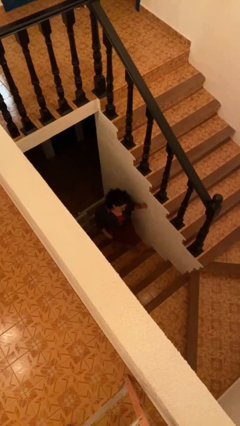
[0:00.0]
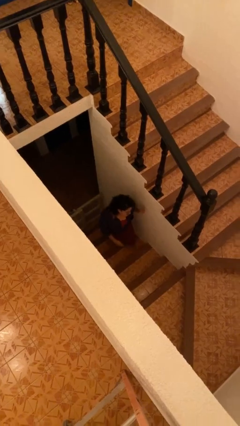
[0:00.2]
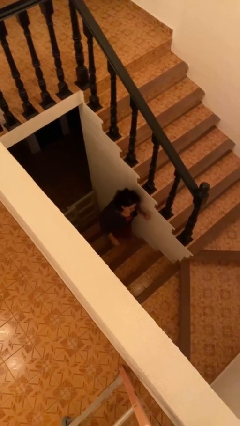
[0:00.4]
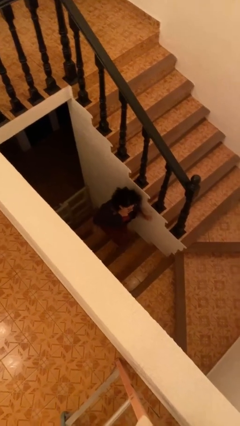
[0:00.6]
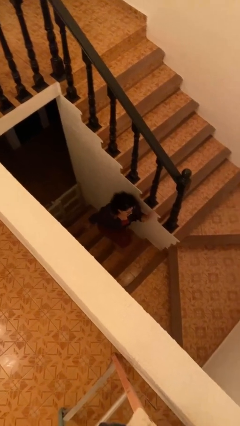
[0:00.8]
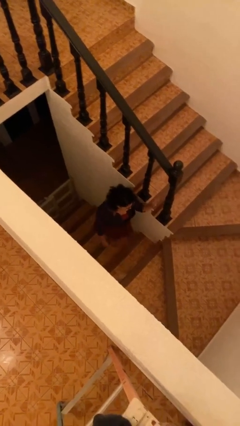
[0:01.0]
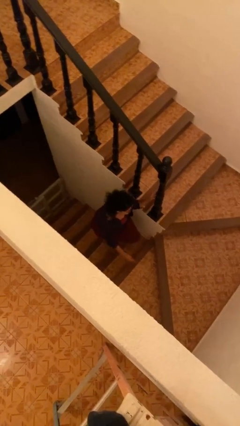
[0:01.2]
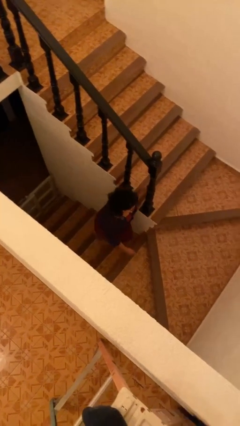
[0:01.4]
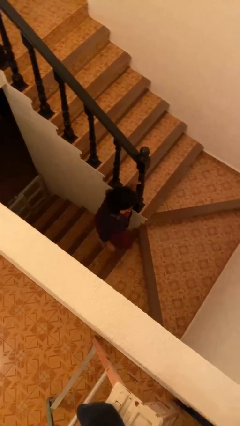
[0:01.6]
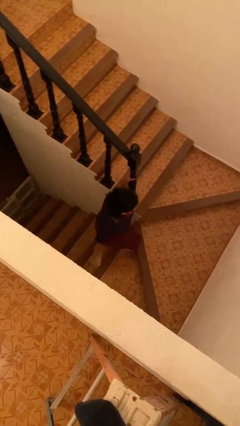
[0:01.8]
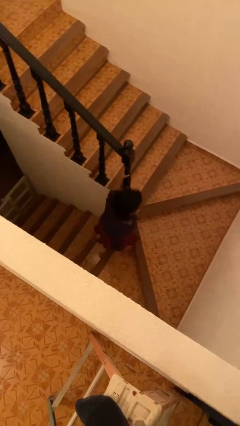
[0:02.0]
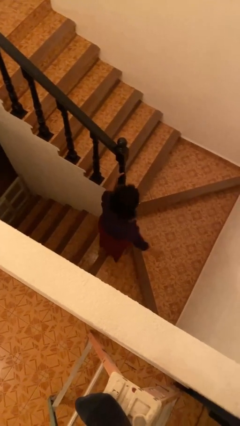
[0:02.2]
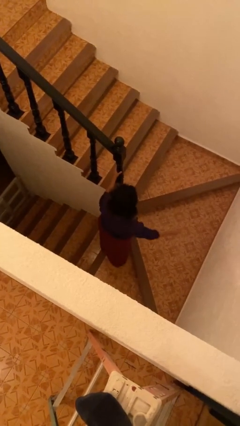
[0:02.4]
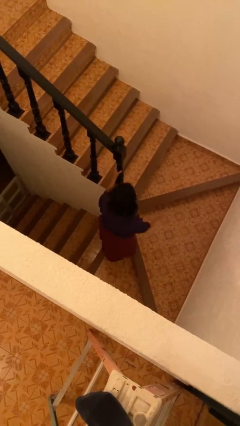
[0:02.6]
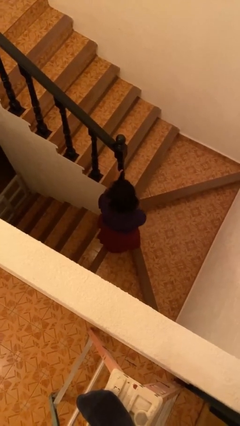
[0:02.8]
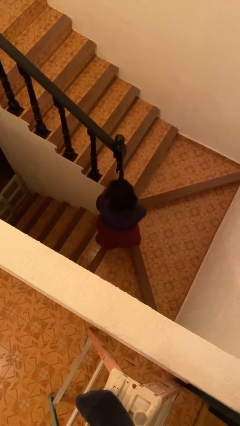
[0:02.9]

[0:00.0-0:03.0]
person climbs up stairs

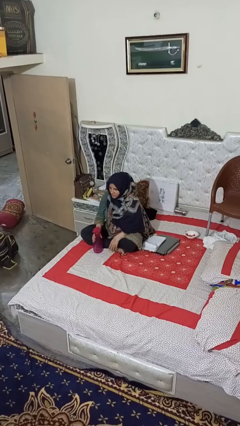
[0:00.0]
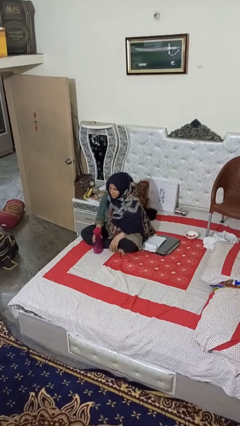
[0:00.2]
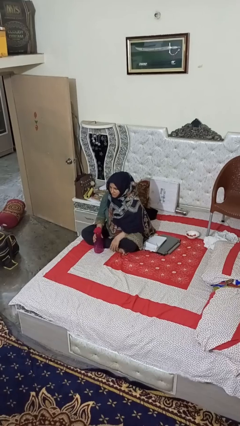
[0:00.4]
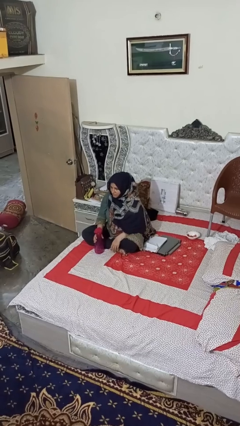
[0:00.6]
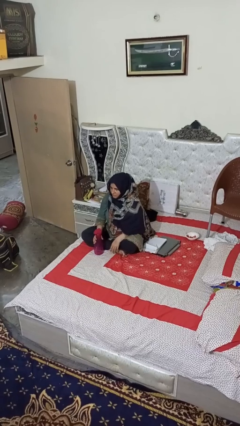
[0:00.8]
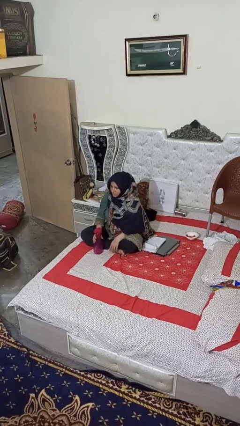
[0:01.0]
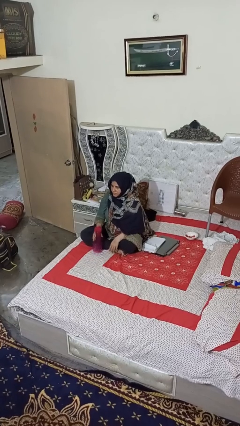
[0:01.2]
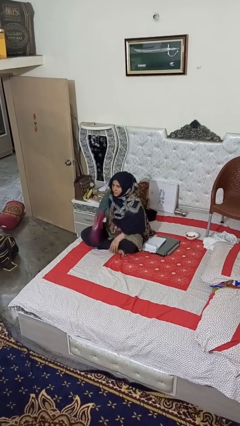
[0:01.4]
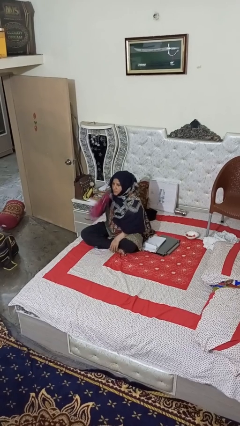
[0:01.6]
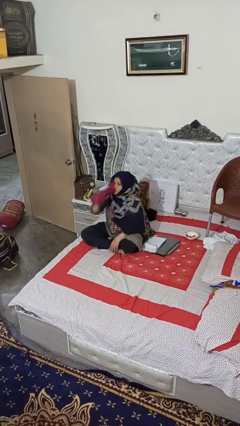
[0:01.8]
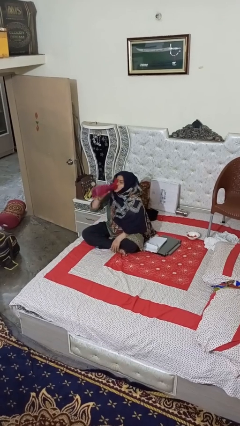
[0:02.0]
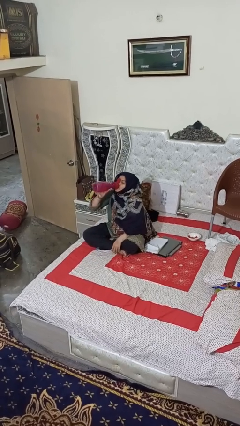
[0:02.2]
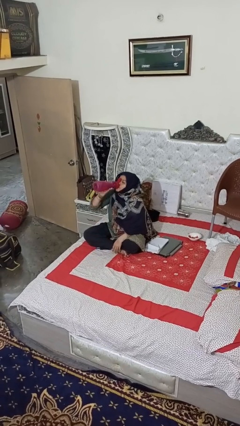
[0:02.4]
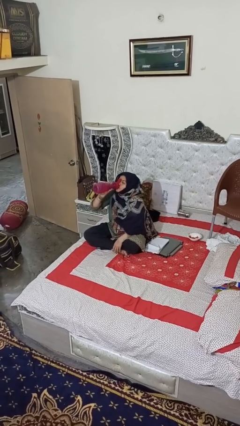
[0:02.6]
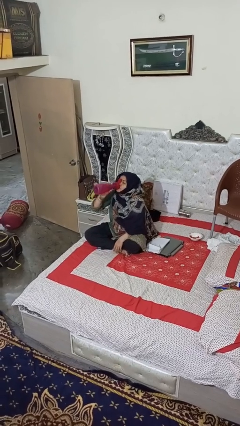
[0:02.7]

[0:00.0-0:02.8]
person drinks from bottle

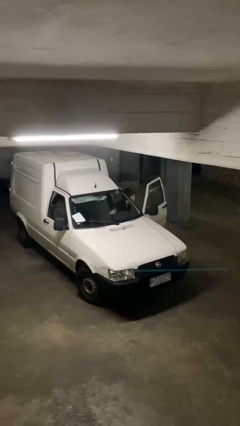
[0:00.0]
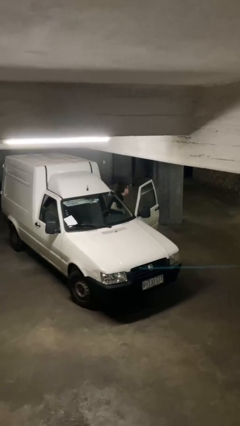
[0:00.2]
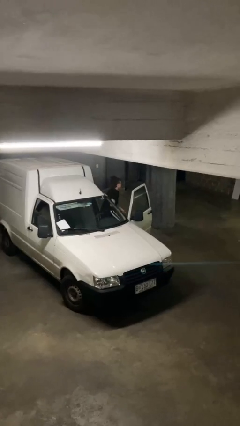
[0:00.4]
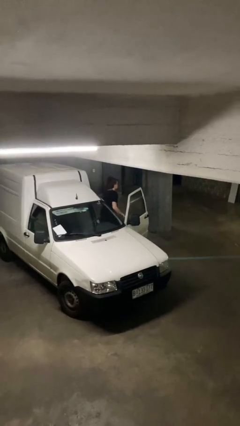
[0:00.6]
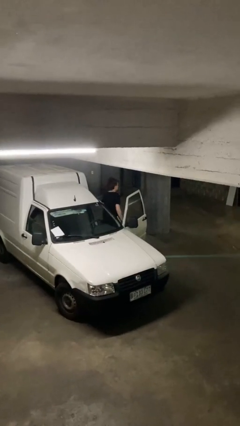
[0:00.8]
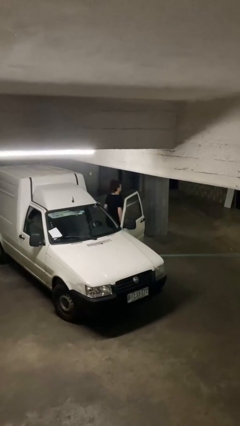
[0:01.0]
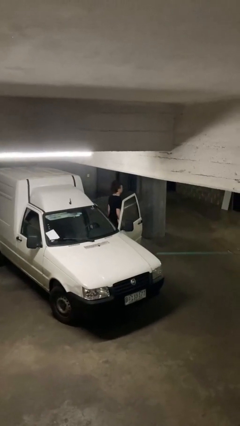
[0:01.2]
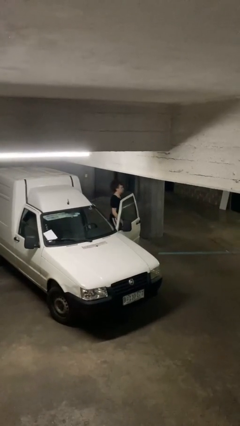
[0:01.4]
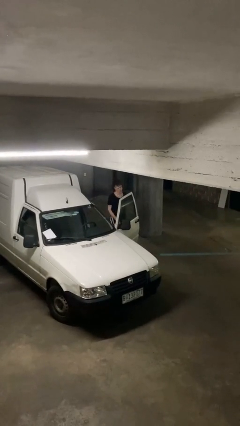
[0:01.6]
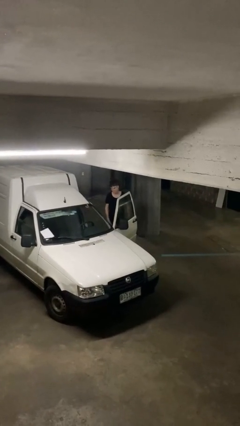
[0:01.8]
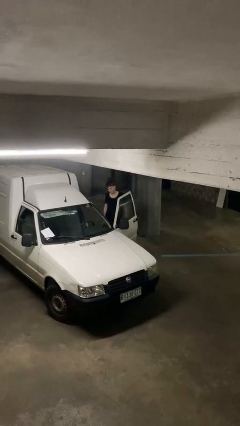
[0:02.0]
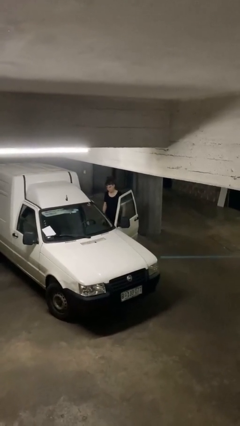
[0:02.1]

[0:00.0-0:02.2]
person exits car

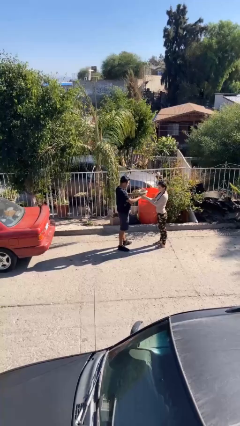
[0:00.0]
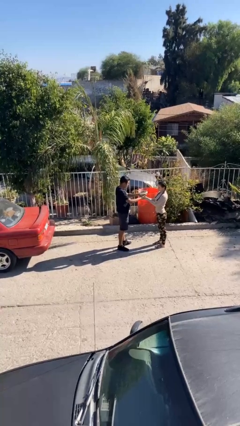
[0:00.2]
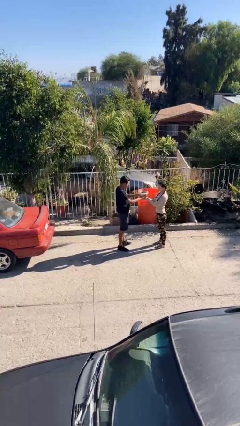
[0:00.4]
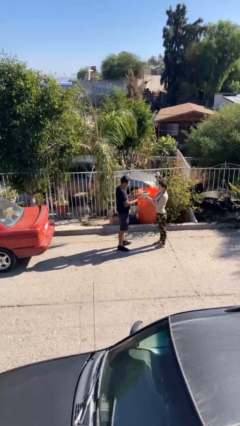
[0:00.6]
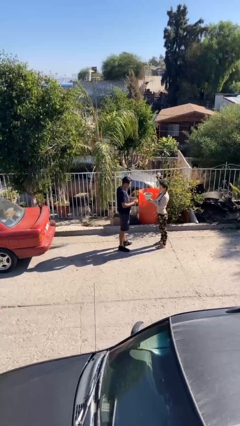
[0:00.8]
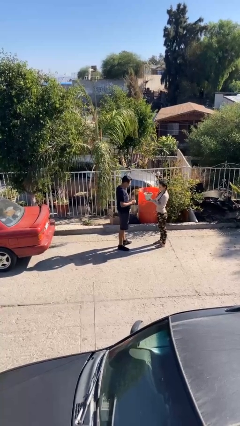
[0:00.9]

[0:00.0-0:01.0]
person transfers object to person

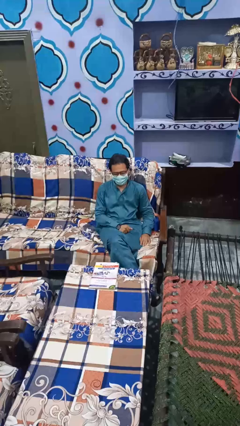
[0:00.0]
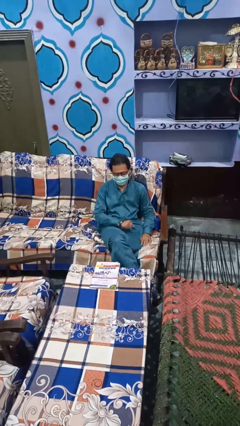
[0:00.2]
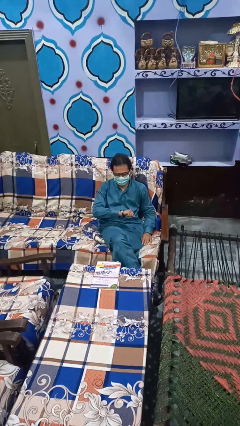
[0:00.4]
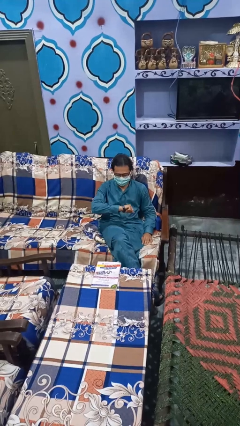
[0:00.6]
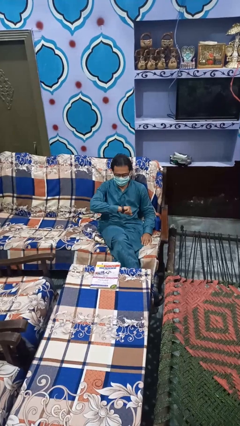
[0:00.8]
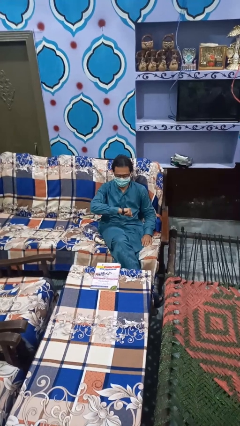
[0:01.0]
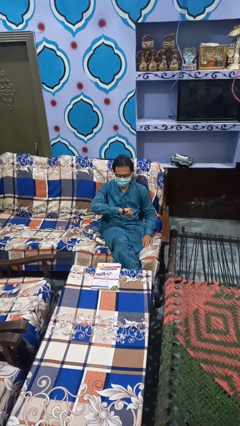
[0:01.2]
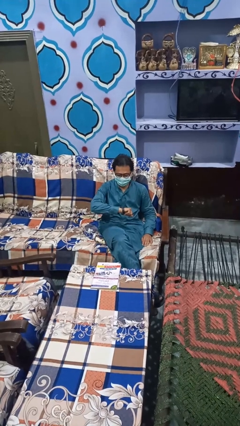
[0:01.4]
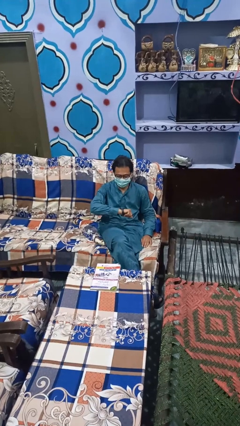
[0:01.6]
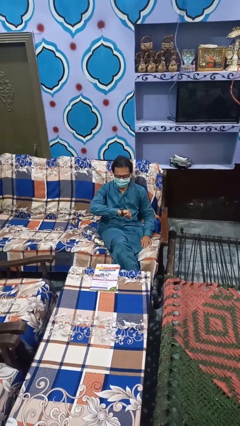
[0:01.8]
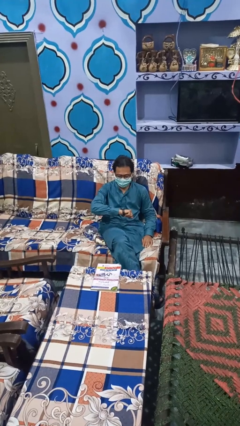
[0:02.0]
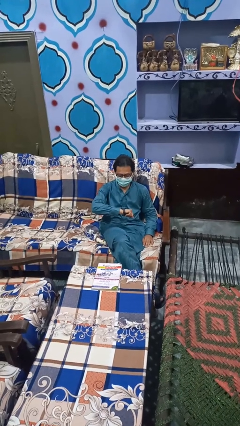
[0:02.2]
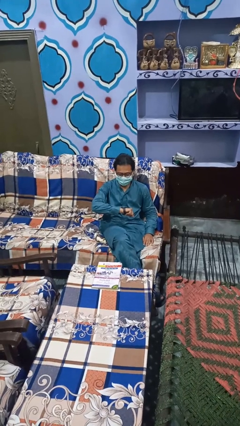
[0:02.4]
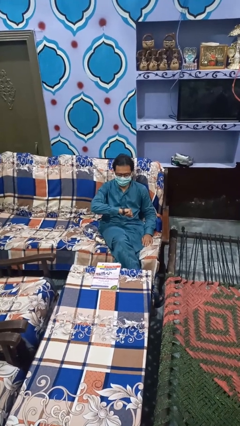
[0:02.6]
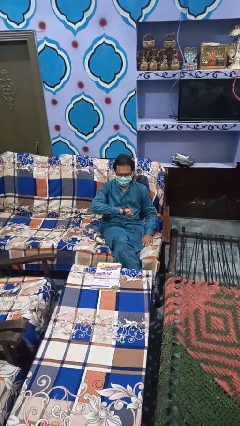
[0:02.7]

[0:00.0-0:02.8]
person looks at wristwatch

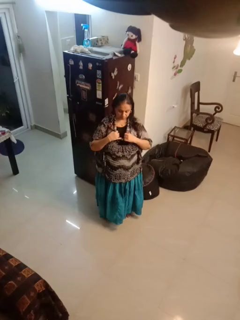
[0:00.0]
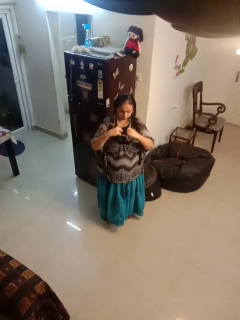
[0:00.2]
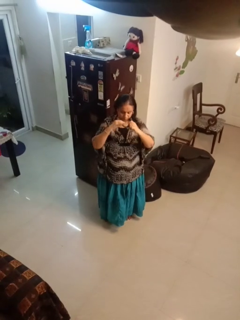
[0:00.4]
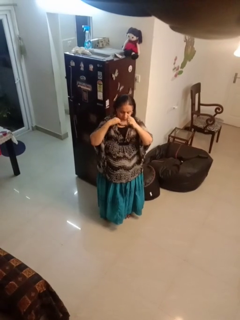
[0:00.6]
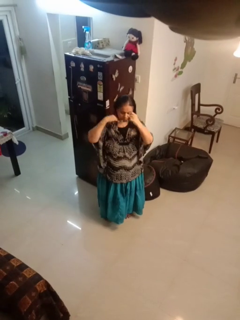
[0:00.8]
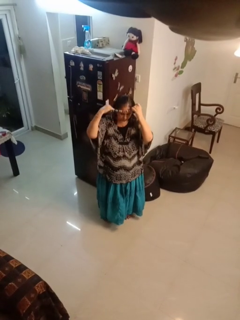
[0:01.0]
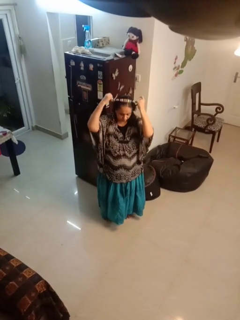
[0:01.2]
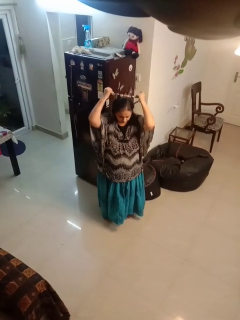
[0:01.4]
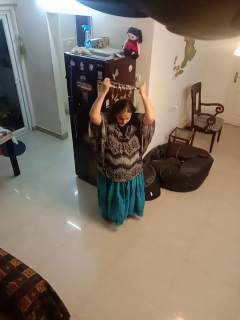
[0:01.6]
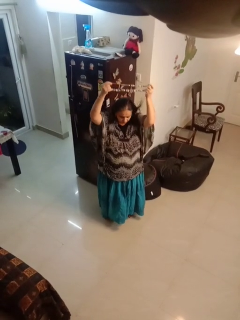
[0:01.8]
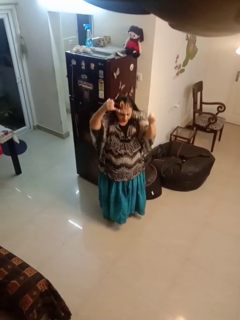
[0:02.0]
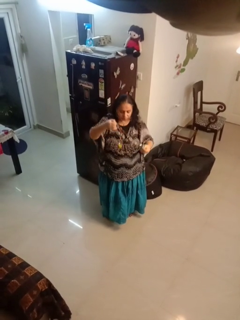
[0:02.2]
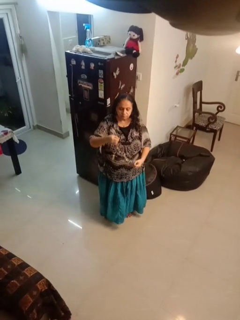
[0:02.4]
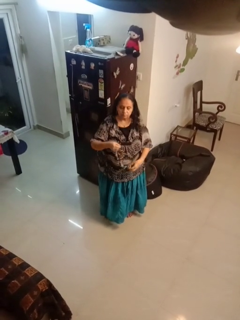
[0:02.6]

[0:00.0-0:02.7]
person takes off necklace

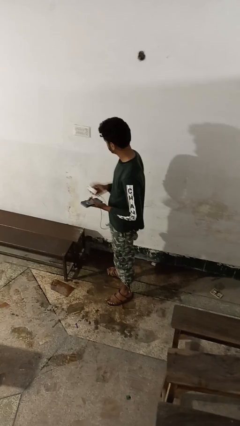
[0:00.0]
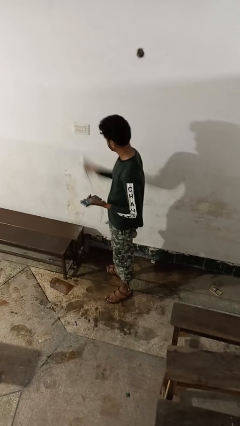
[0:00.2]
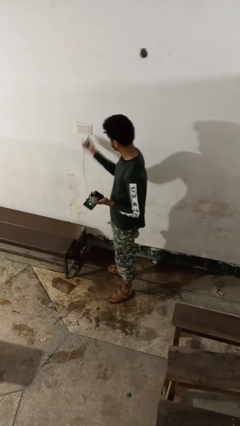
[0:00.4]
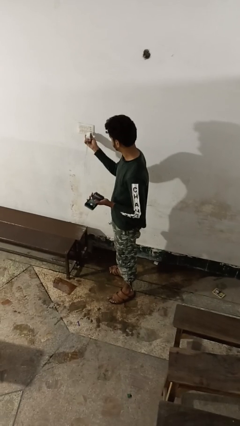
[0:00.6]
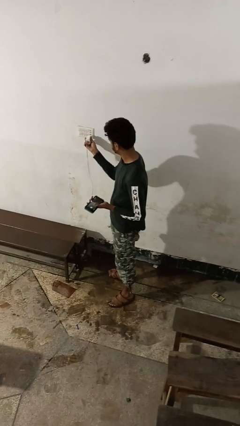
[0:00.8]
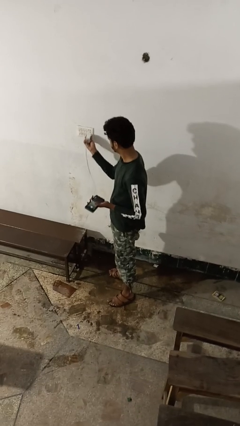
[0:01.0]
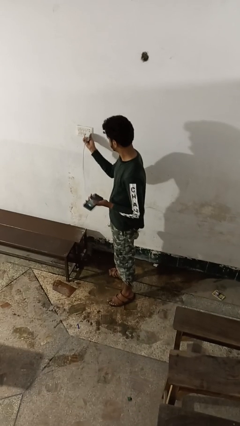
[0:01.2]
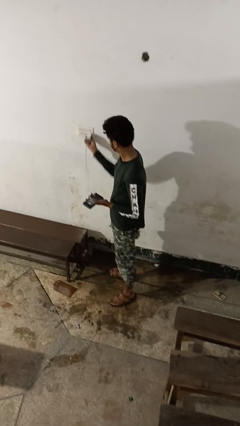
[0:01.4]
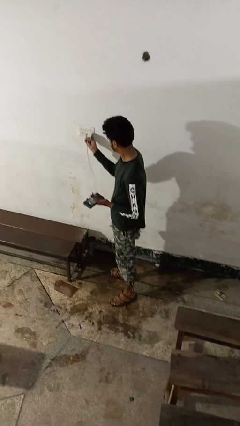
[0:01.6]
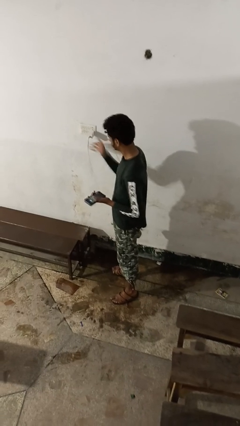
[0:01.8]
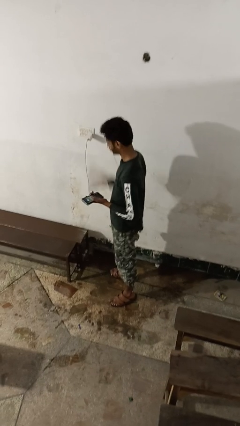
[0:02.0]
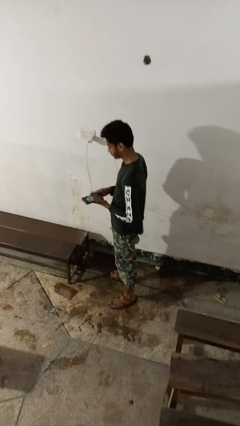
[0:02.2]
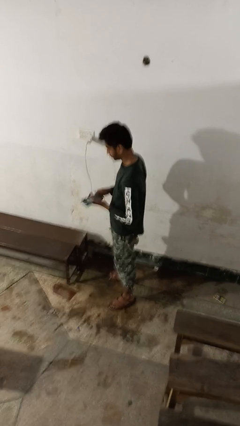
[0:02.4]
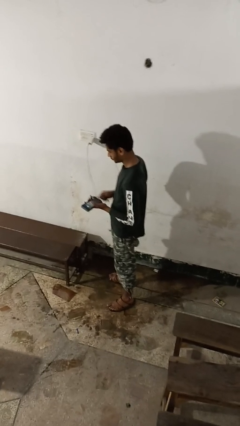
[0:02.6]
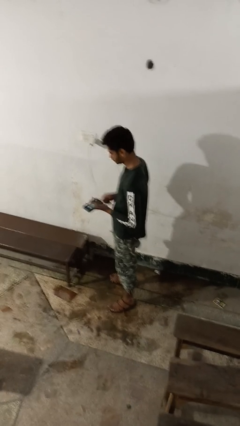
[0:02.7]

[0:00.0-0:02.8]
person plugs into electrical socket

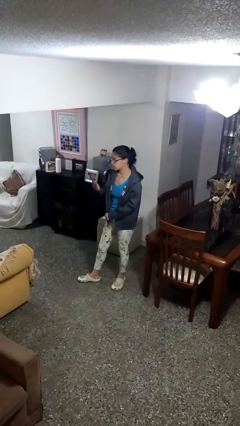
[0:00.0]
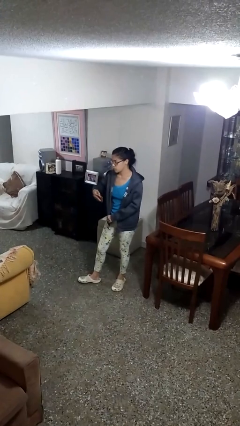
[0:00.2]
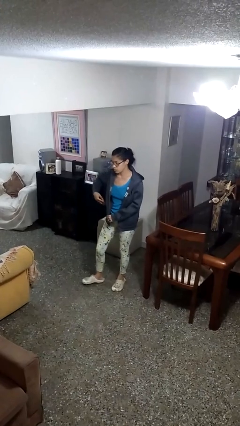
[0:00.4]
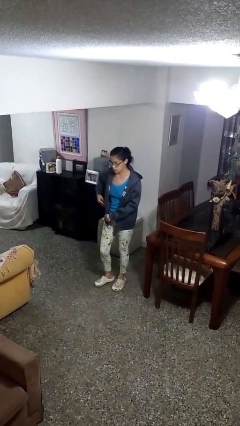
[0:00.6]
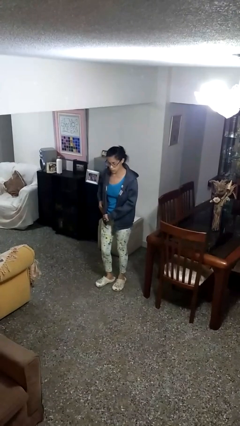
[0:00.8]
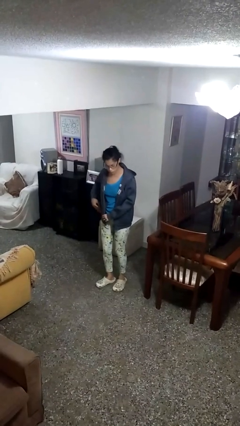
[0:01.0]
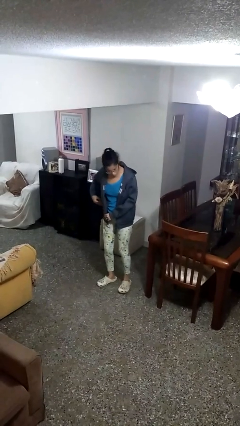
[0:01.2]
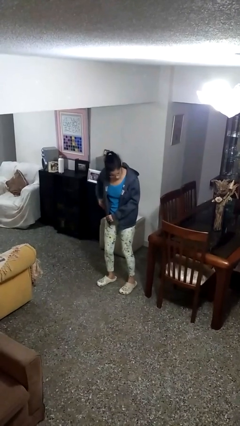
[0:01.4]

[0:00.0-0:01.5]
person puts phone into pocket
